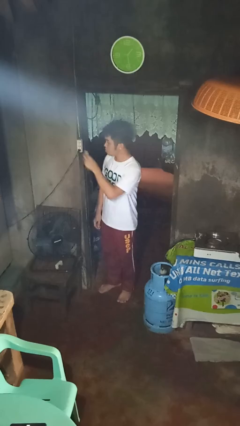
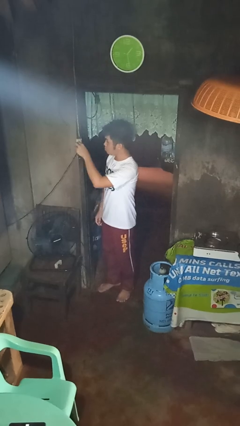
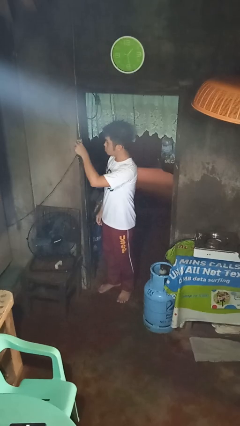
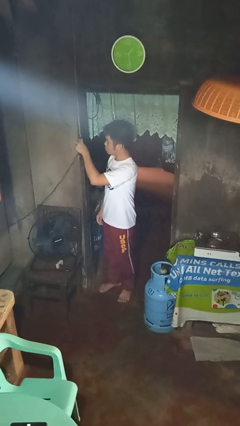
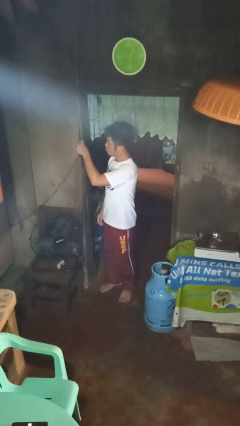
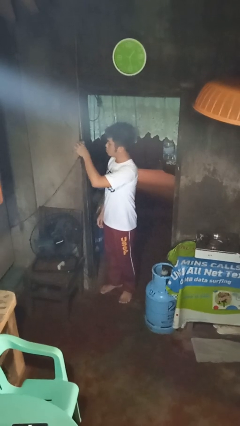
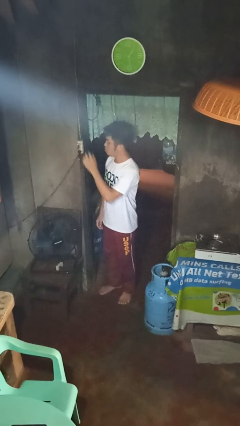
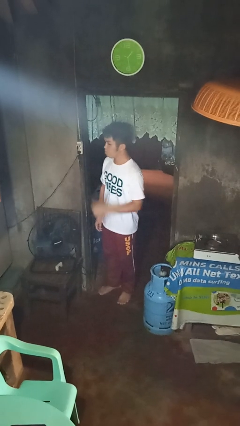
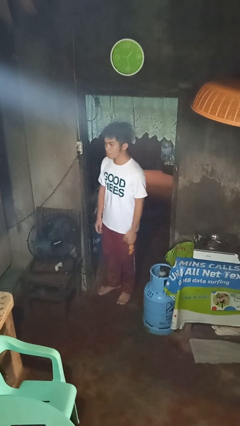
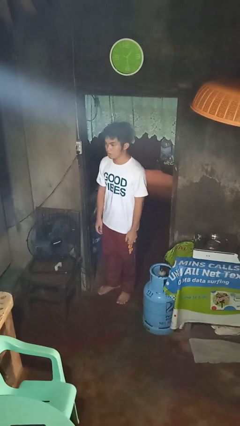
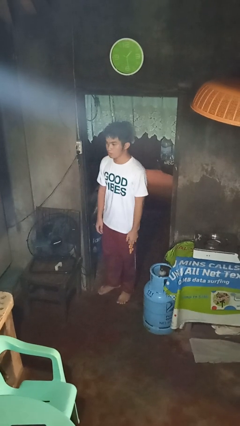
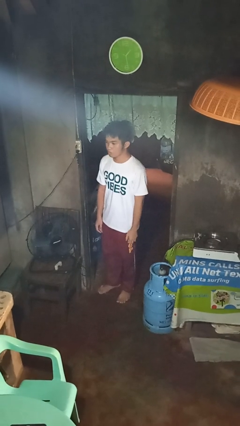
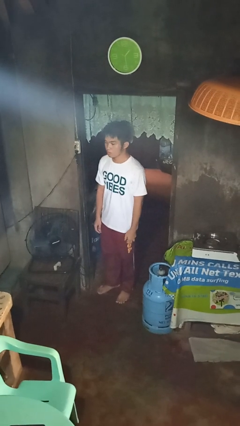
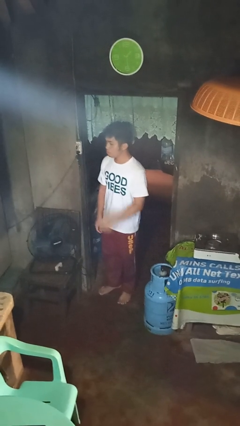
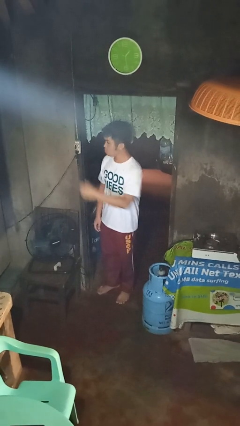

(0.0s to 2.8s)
person plugs into electrical socket

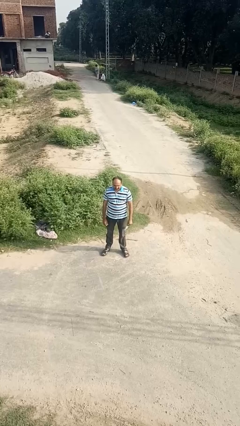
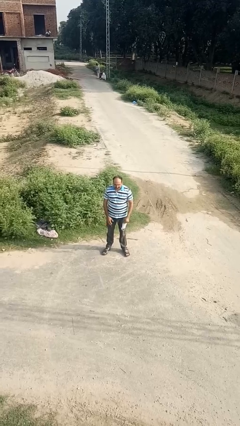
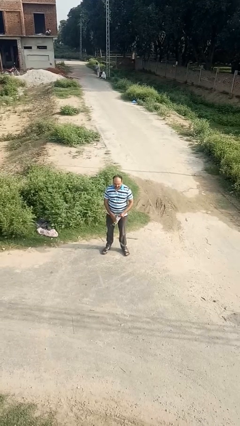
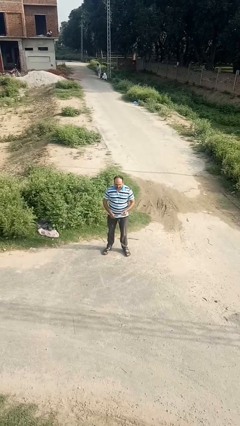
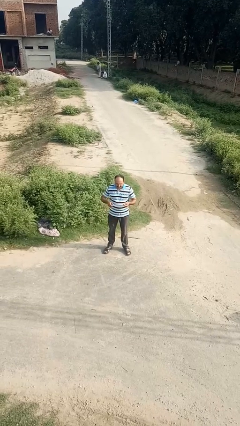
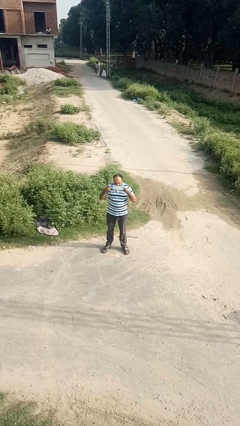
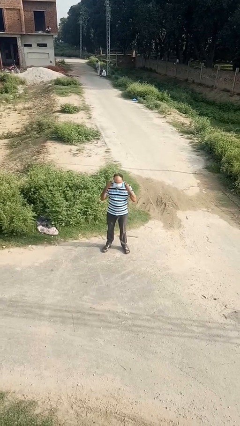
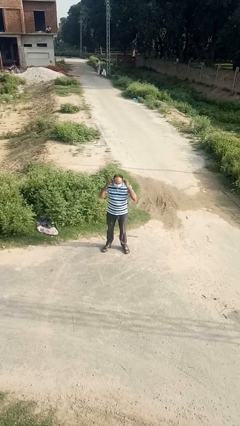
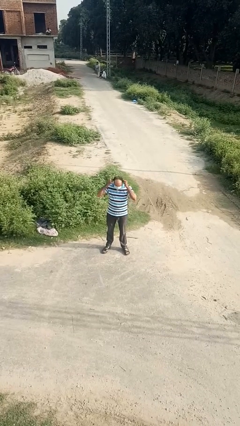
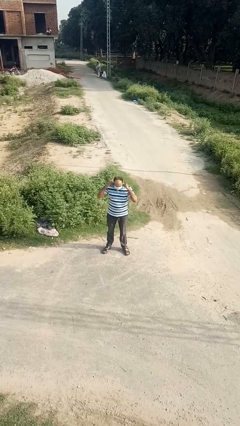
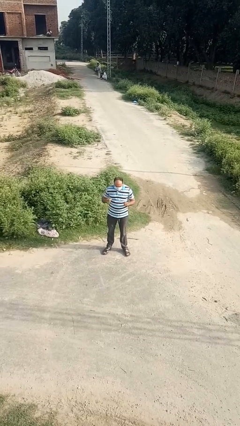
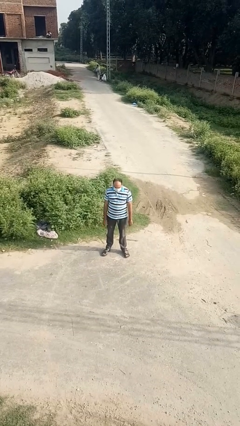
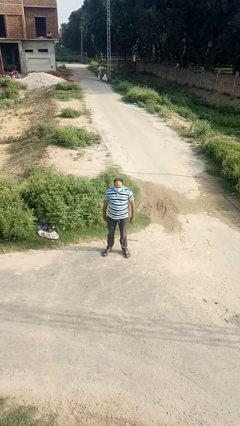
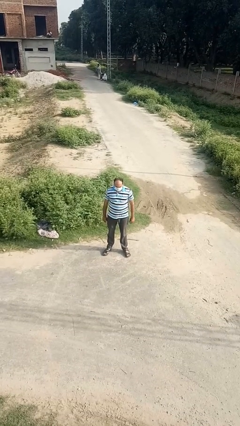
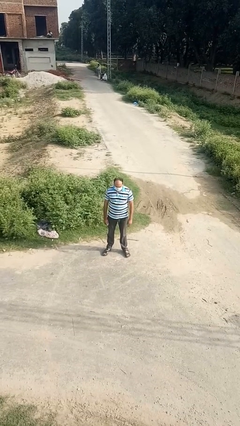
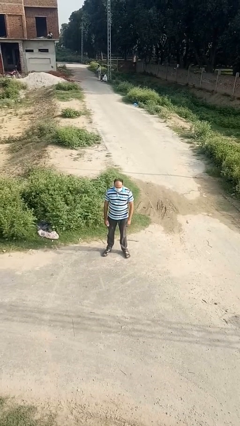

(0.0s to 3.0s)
person puts on facemask

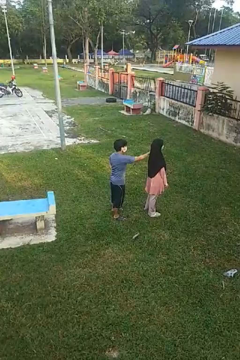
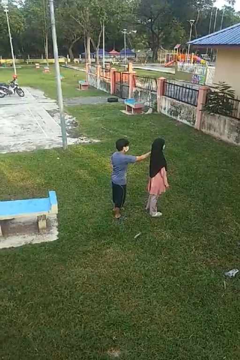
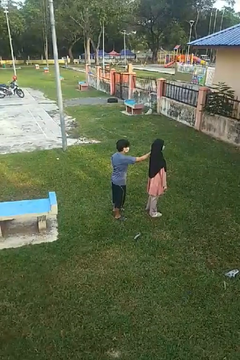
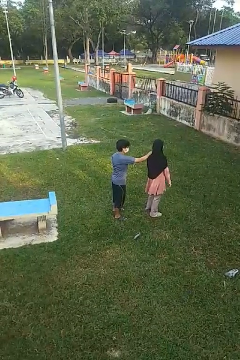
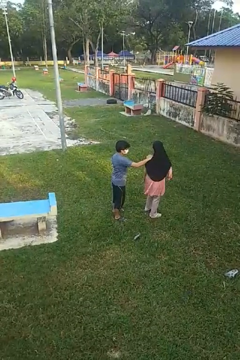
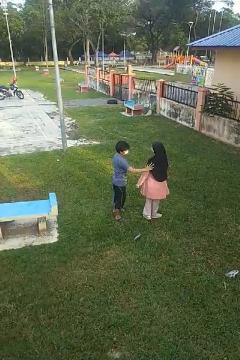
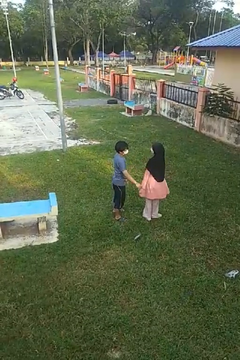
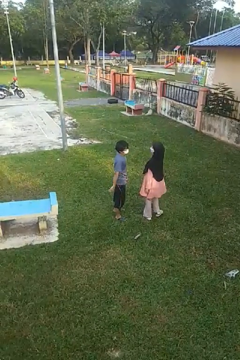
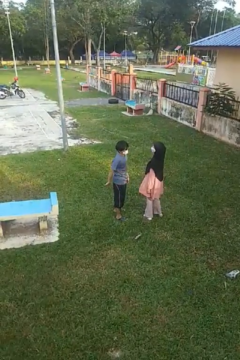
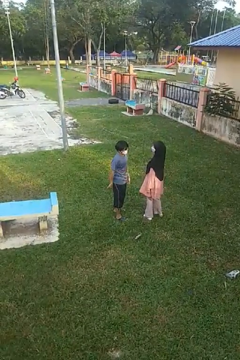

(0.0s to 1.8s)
person spins person around

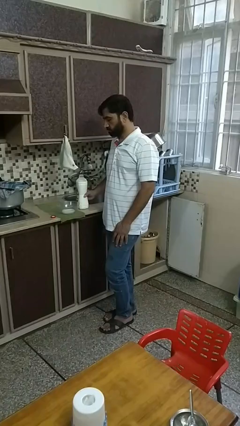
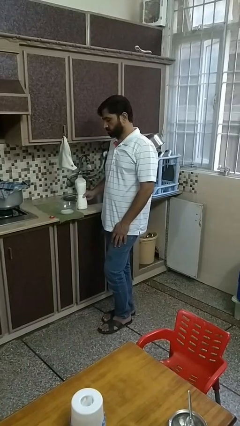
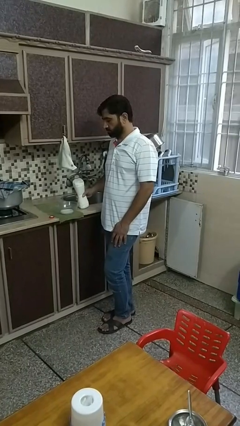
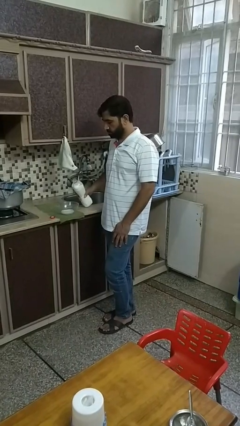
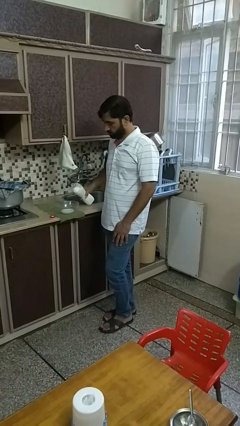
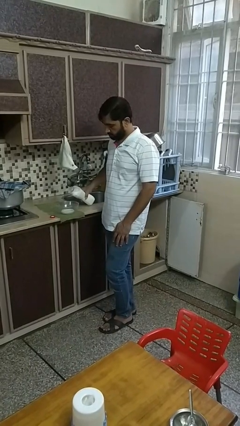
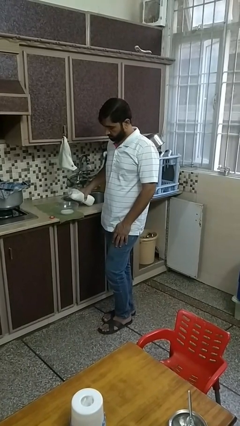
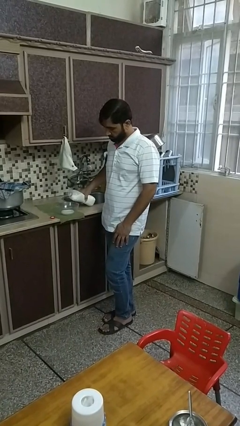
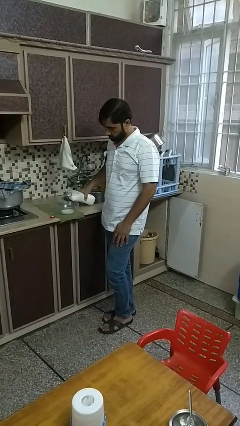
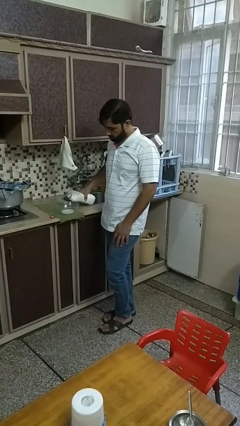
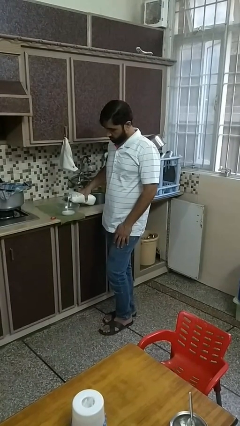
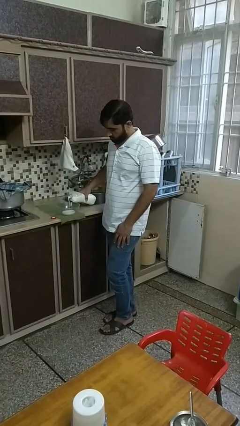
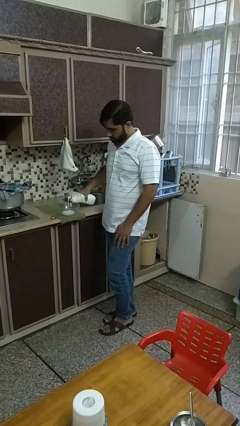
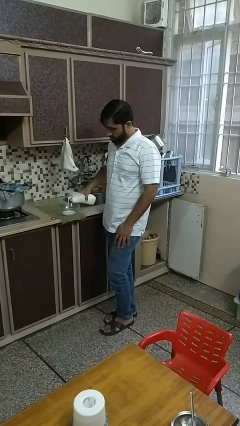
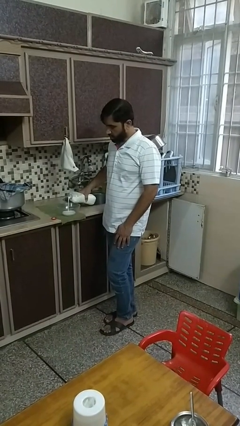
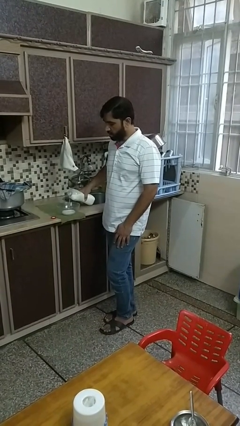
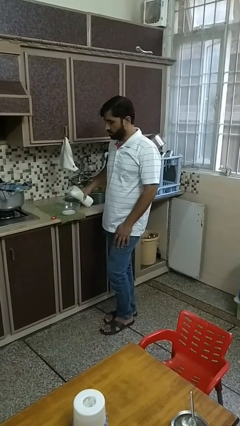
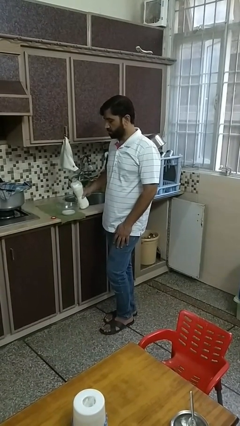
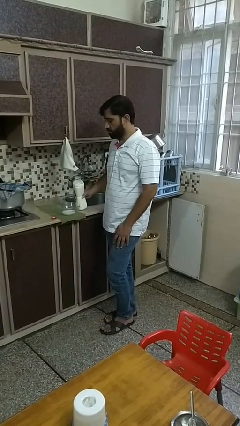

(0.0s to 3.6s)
person pours into bowl

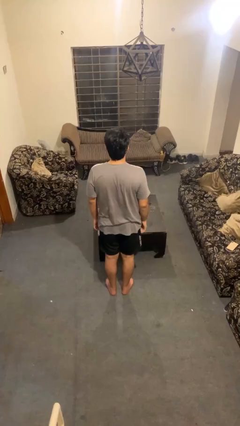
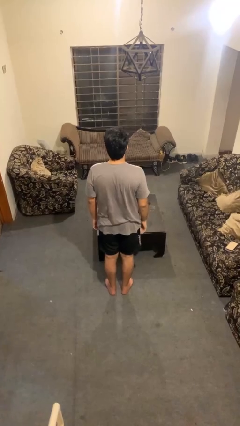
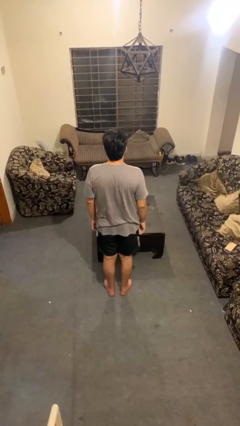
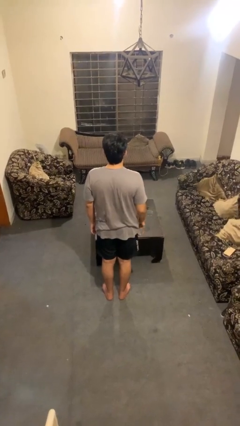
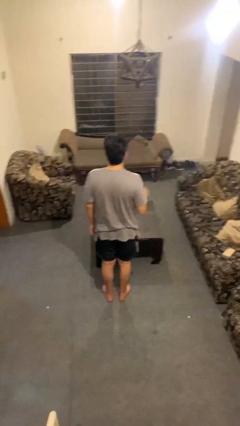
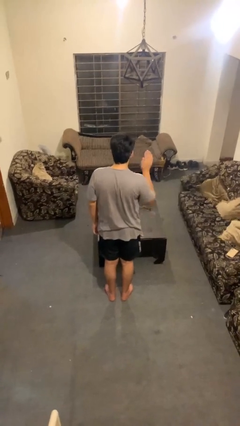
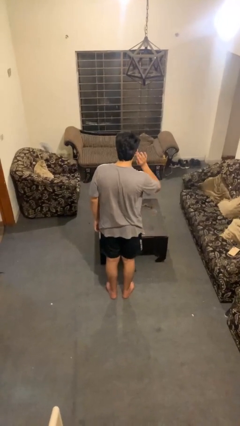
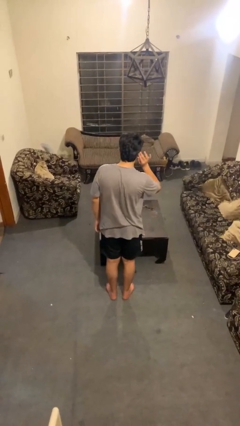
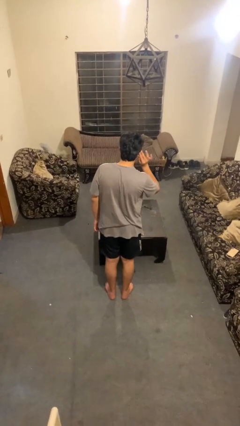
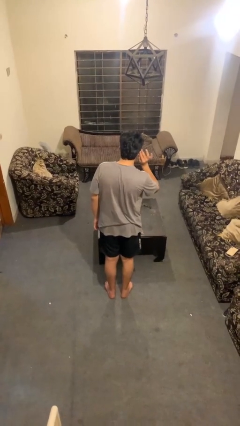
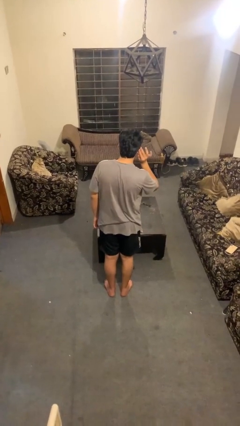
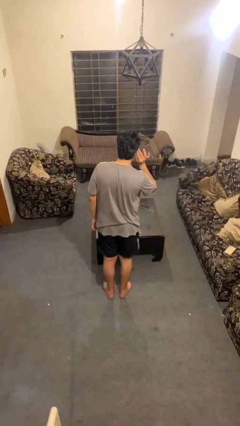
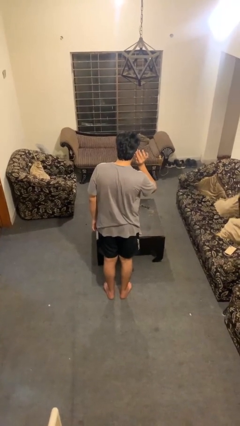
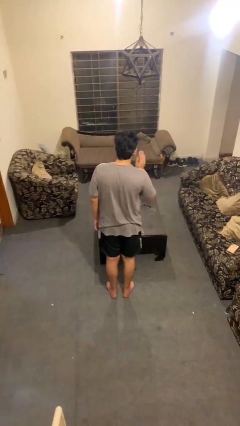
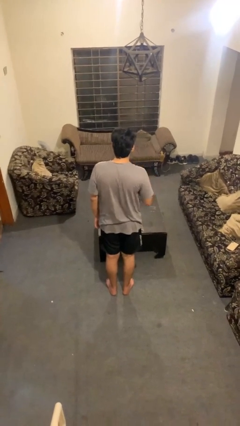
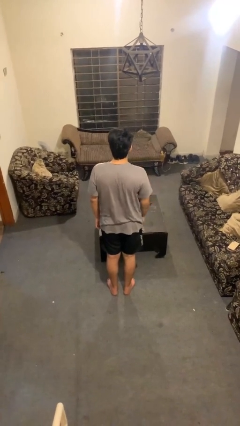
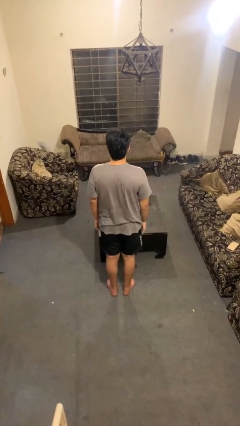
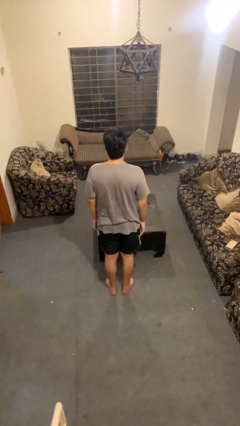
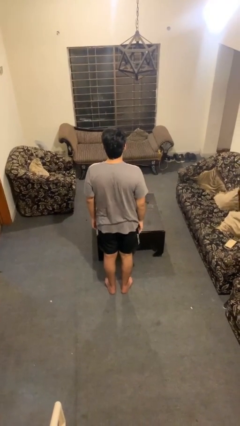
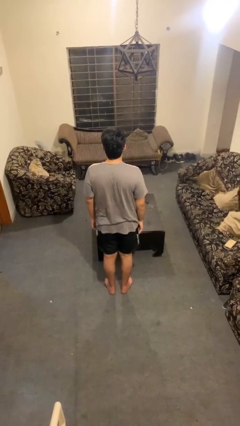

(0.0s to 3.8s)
person gestures listen closely

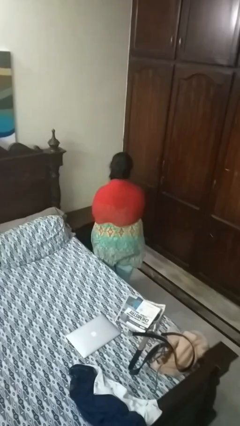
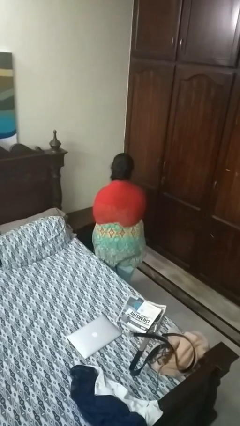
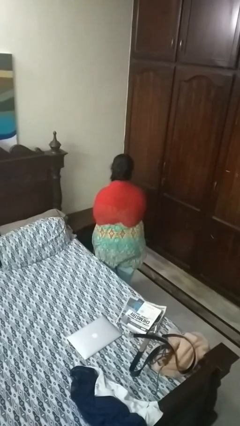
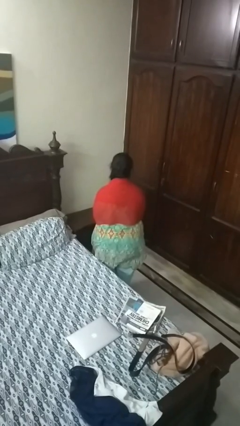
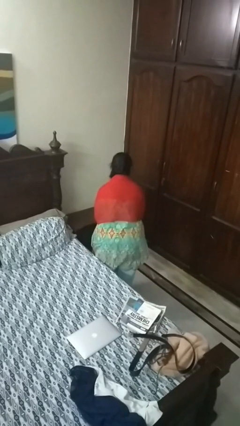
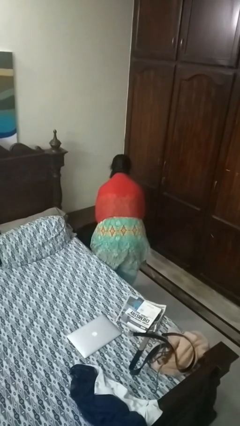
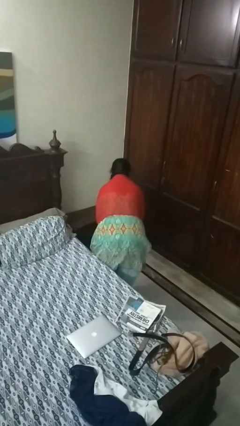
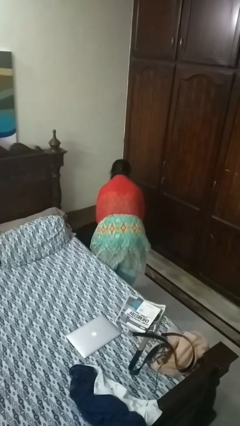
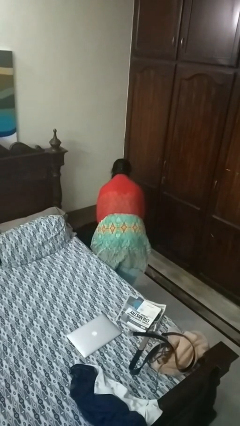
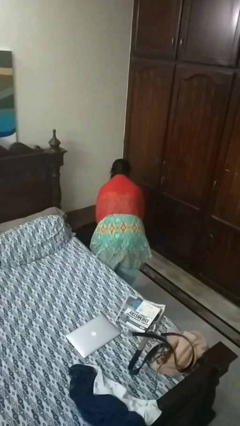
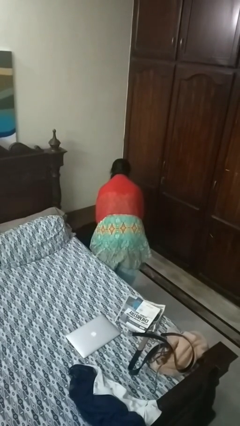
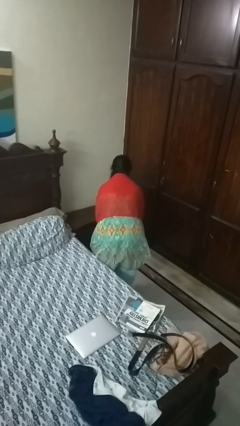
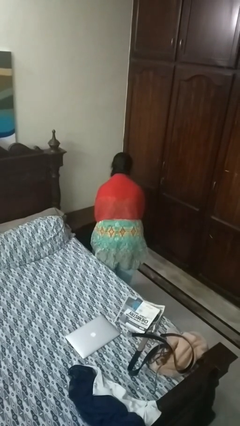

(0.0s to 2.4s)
person bows
